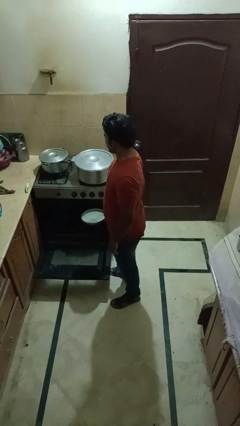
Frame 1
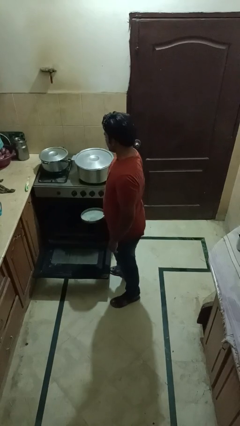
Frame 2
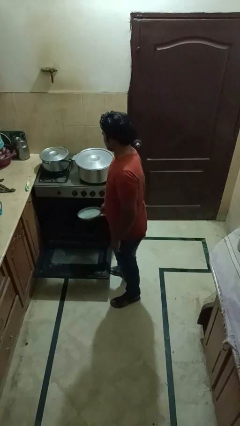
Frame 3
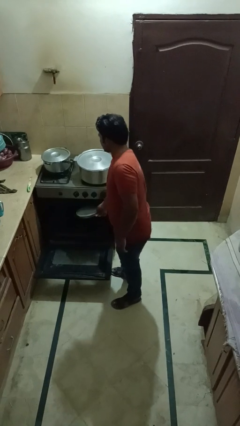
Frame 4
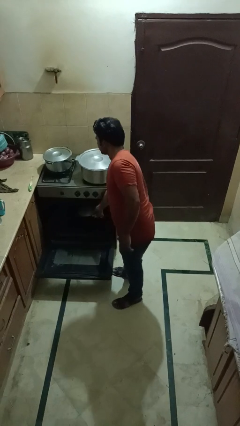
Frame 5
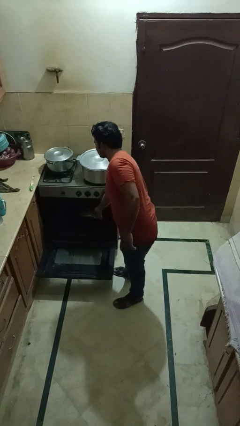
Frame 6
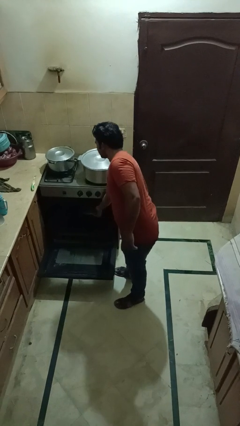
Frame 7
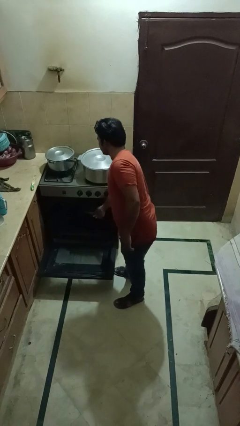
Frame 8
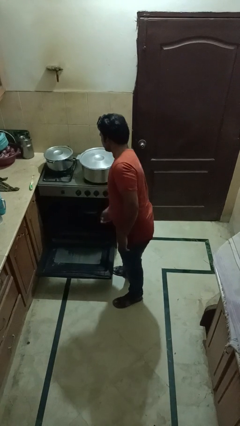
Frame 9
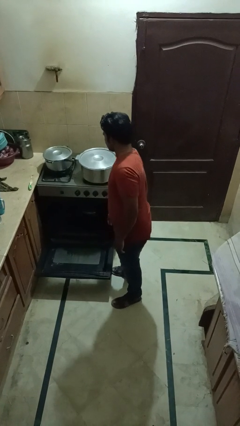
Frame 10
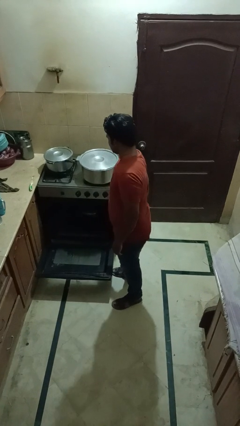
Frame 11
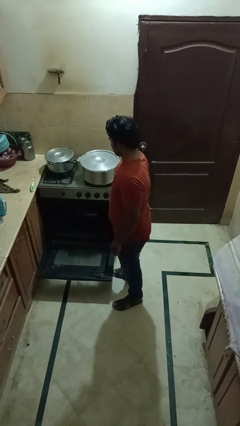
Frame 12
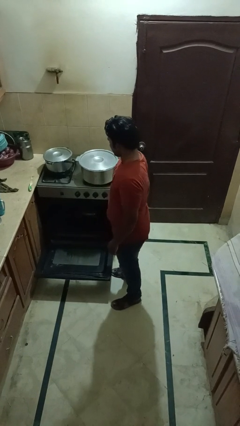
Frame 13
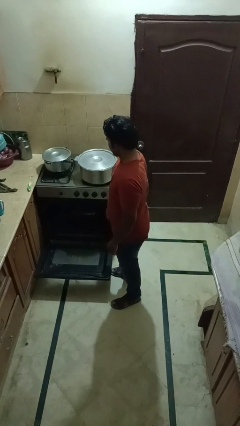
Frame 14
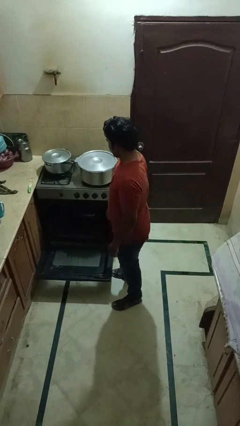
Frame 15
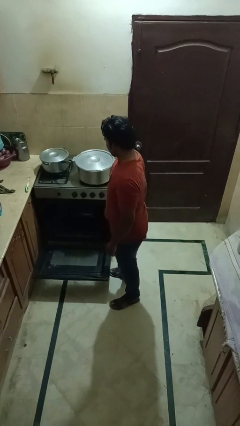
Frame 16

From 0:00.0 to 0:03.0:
person puts object into oven

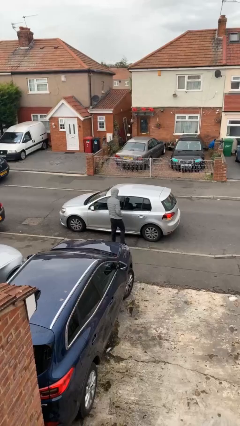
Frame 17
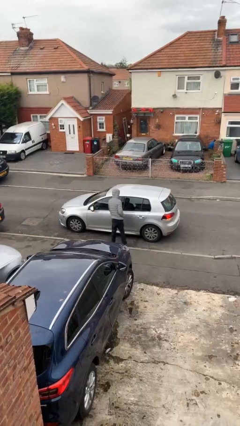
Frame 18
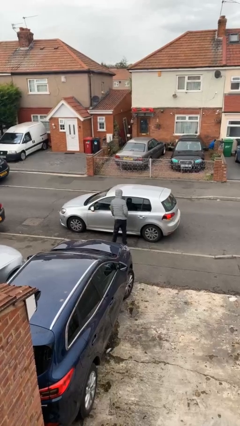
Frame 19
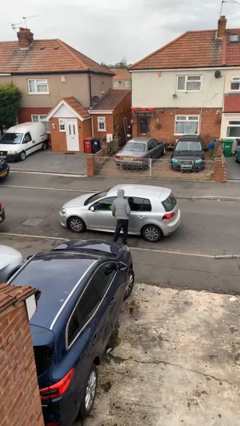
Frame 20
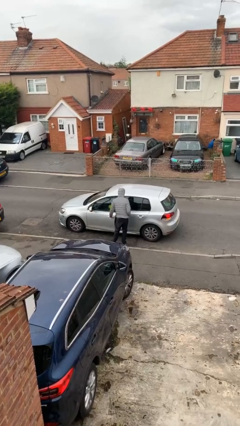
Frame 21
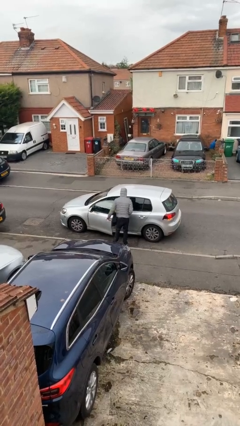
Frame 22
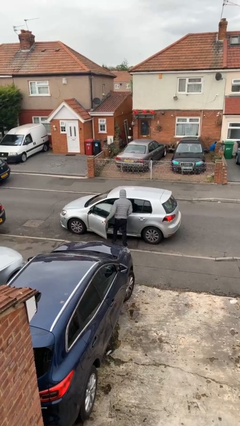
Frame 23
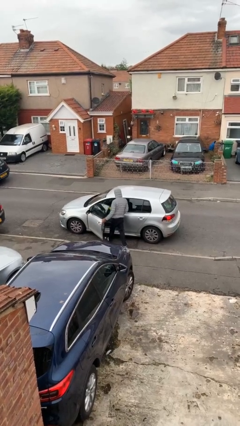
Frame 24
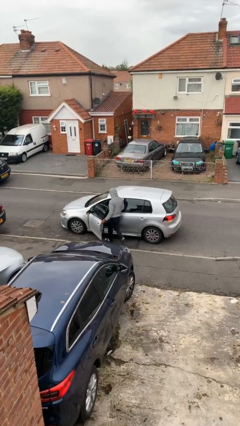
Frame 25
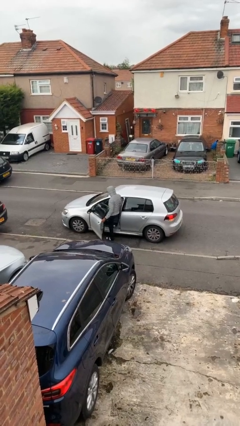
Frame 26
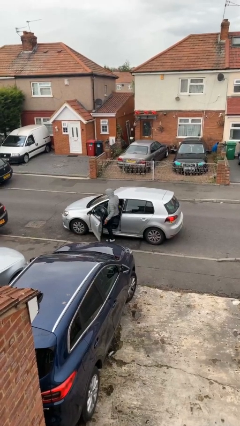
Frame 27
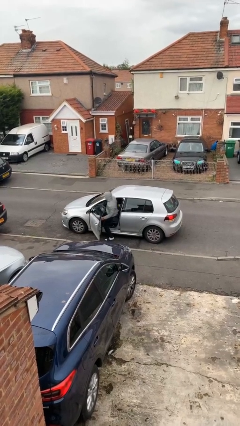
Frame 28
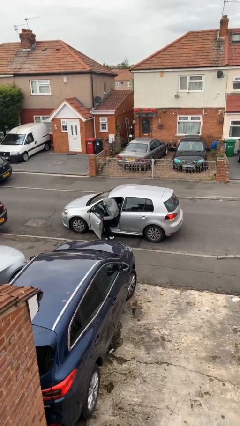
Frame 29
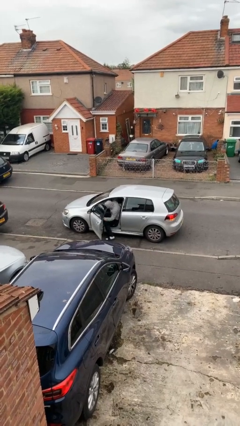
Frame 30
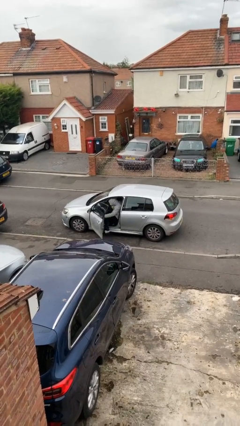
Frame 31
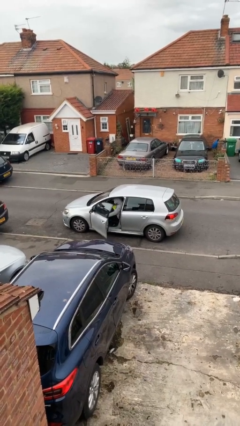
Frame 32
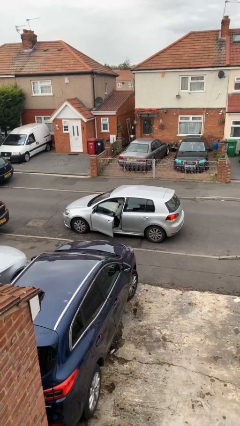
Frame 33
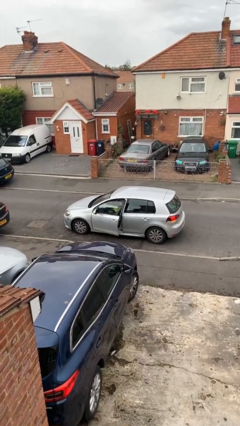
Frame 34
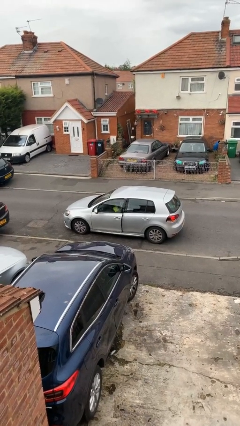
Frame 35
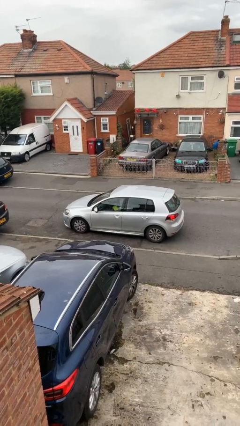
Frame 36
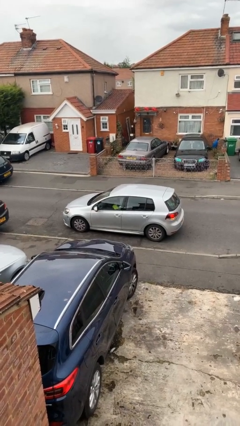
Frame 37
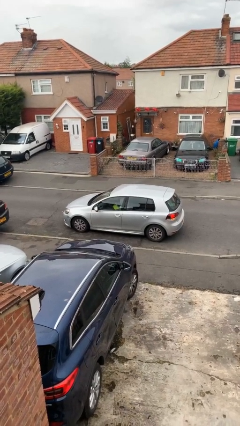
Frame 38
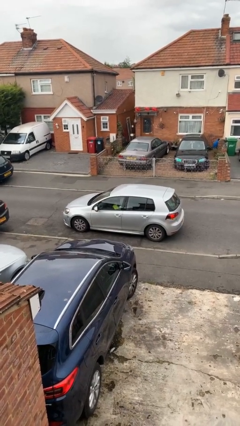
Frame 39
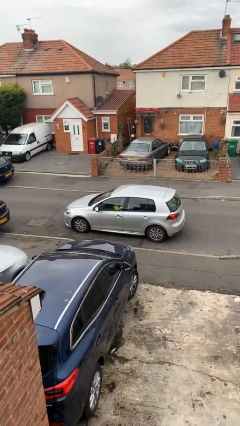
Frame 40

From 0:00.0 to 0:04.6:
car picks up person

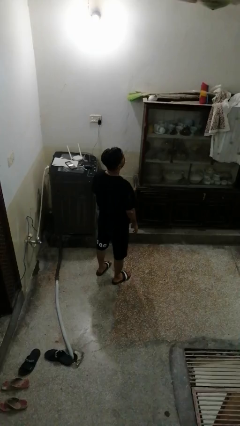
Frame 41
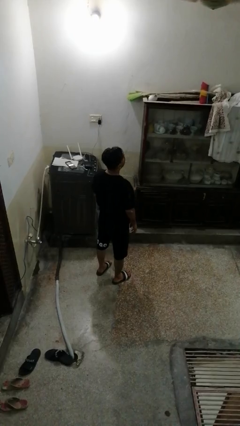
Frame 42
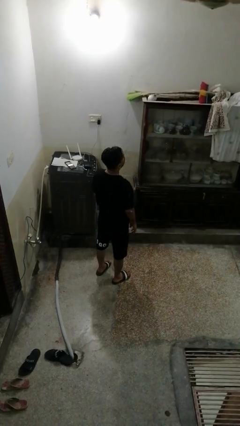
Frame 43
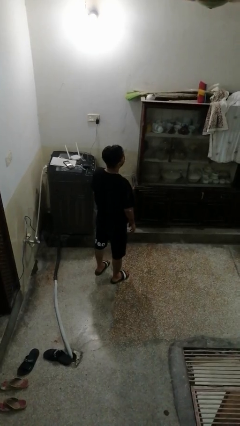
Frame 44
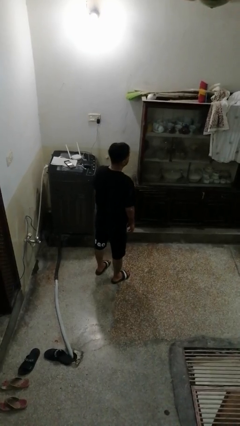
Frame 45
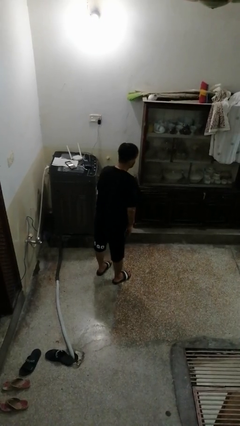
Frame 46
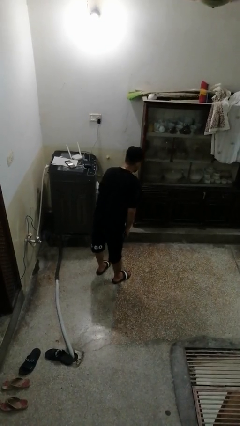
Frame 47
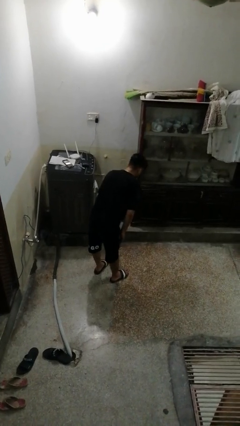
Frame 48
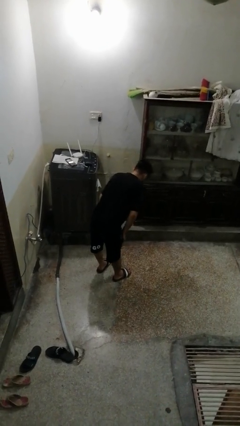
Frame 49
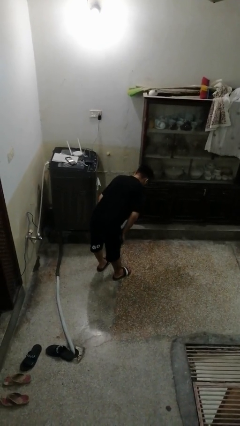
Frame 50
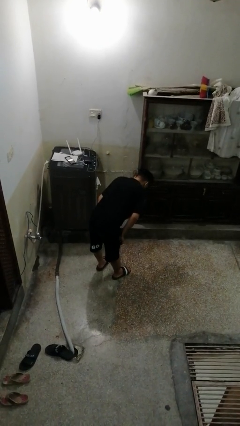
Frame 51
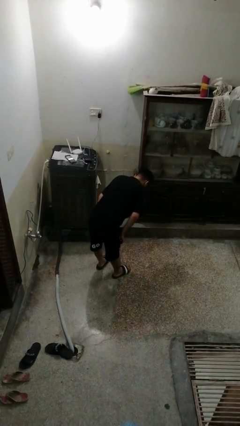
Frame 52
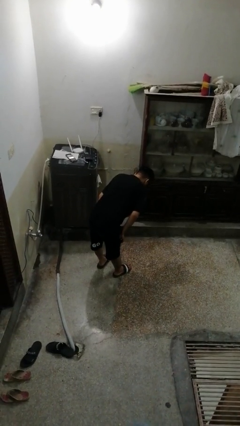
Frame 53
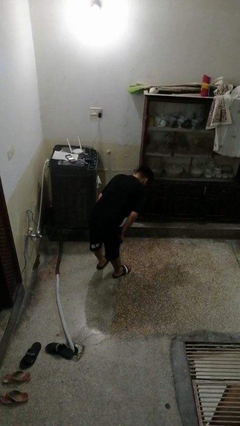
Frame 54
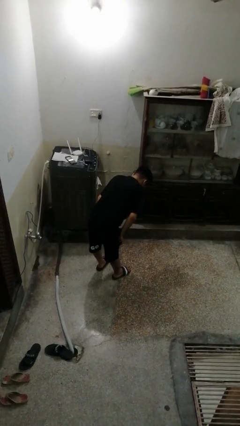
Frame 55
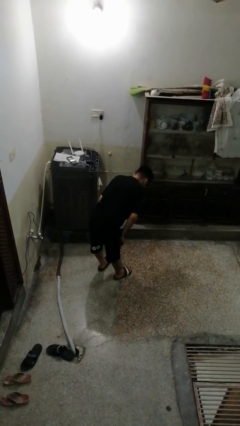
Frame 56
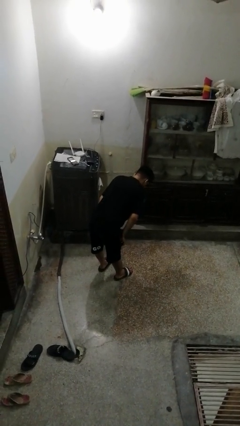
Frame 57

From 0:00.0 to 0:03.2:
person bows

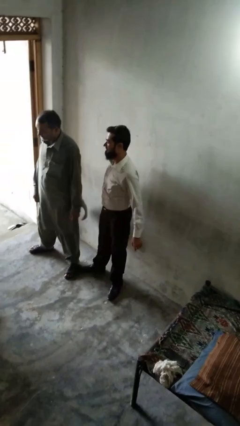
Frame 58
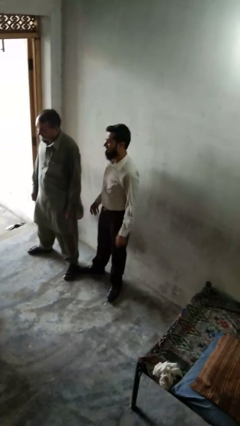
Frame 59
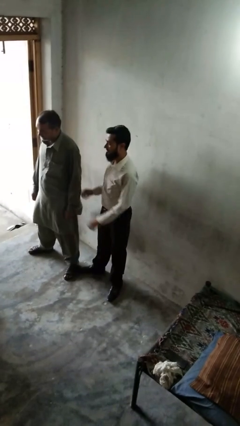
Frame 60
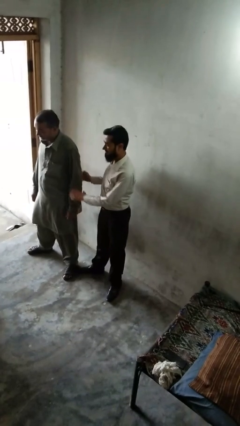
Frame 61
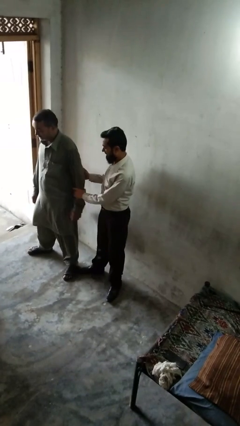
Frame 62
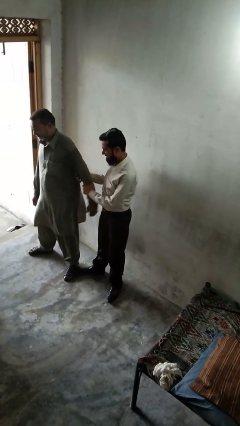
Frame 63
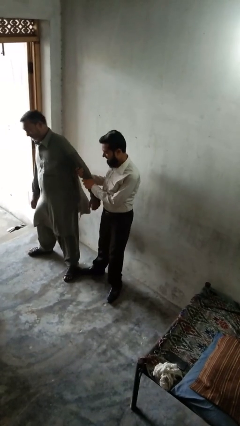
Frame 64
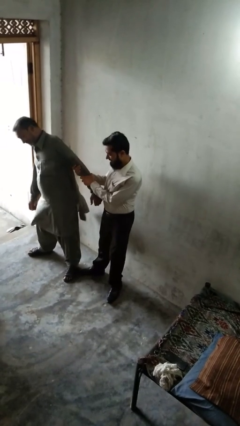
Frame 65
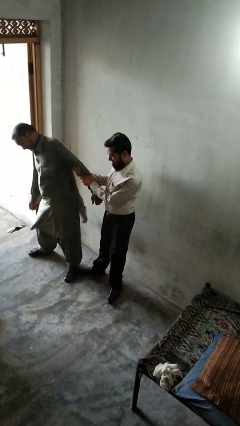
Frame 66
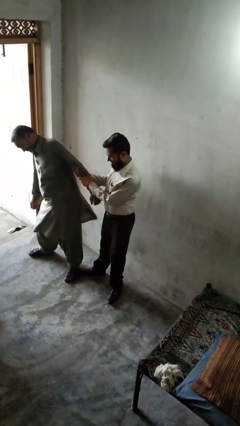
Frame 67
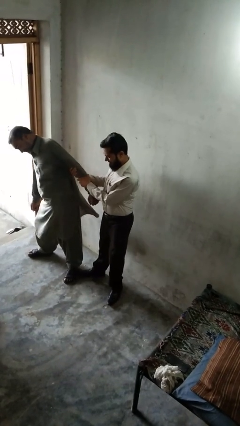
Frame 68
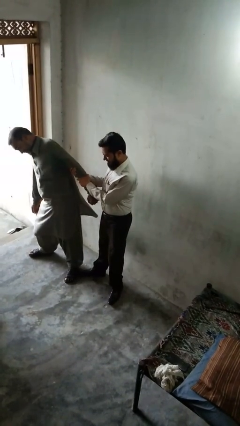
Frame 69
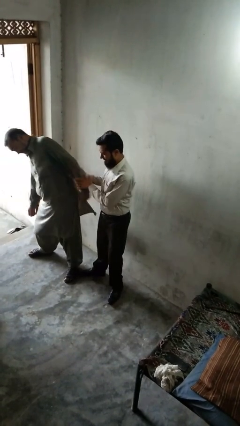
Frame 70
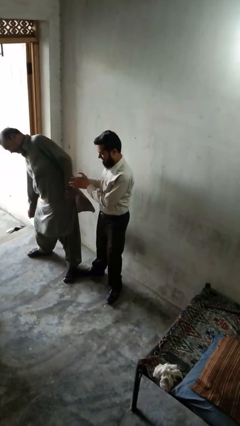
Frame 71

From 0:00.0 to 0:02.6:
person grabs person by forearm

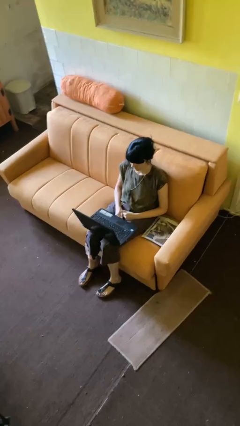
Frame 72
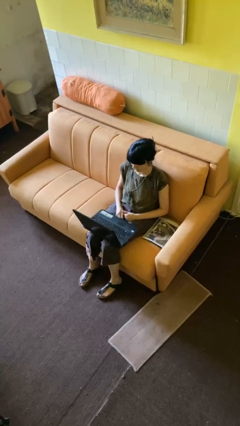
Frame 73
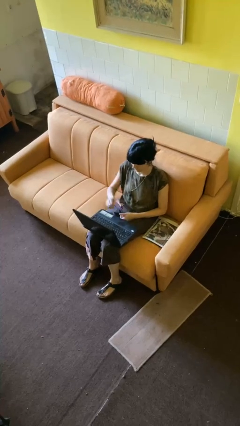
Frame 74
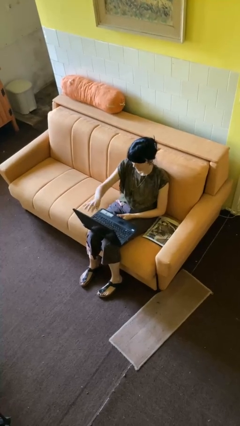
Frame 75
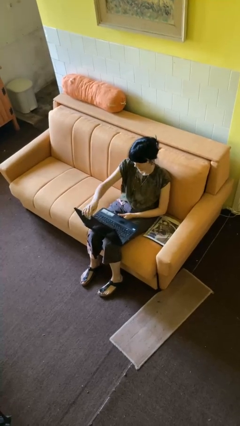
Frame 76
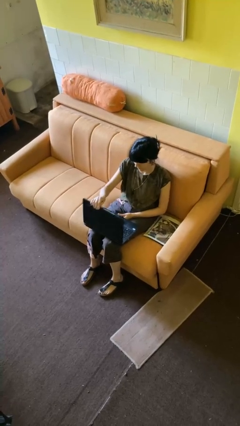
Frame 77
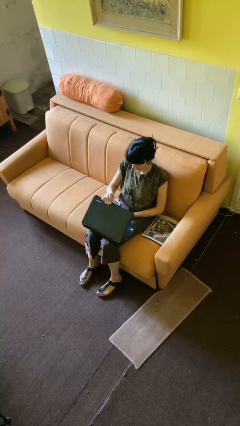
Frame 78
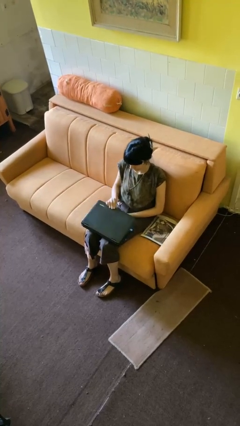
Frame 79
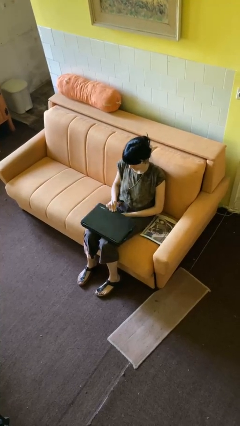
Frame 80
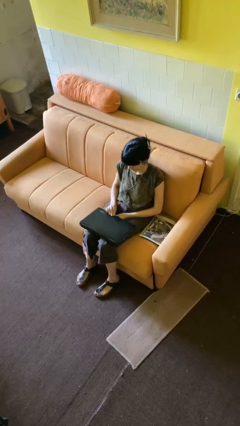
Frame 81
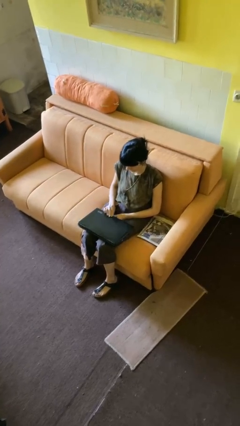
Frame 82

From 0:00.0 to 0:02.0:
person closes laptop

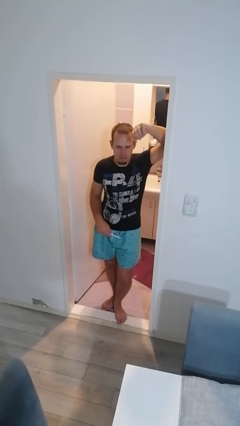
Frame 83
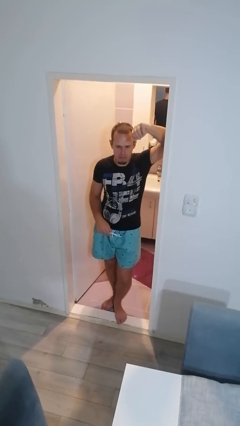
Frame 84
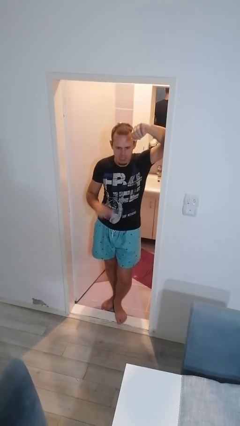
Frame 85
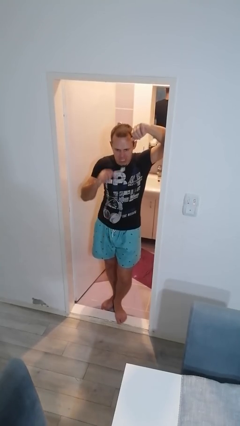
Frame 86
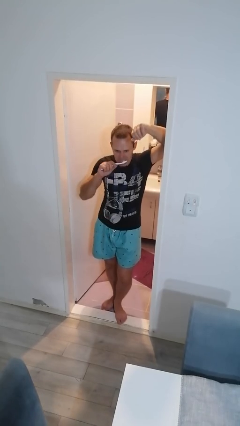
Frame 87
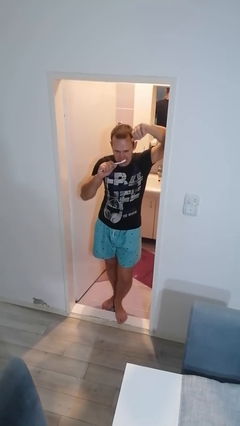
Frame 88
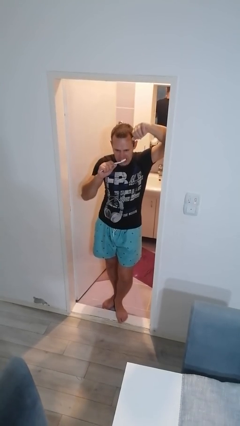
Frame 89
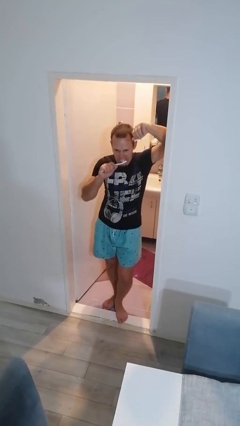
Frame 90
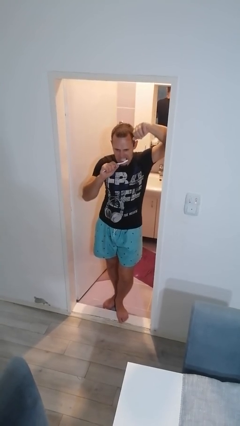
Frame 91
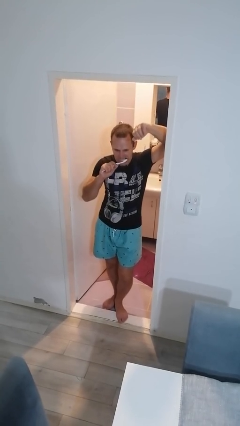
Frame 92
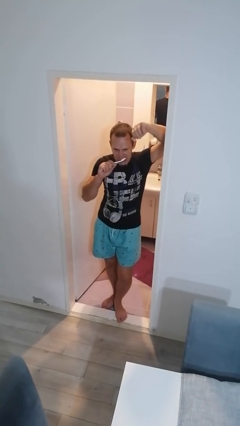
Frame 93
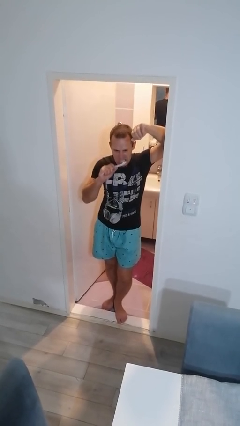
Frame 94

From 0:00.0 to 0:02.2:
person brushes teeth
